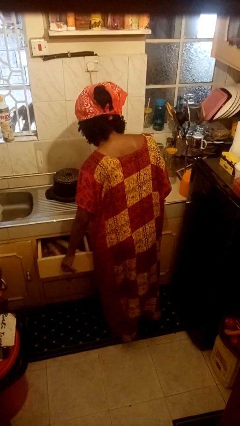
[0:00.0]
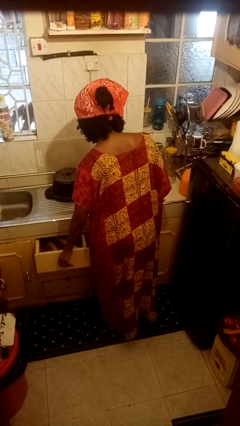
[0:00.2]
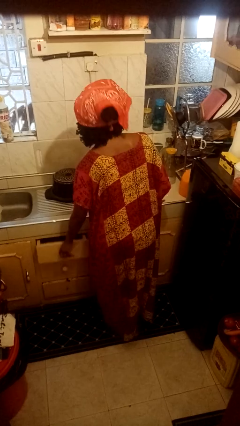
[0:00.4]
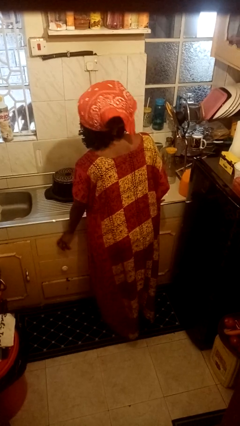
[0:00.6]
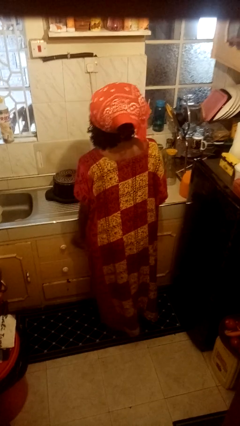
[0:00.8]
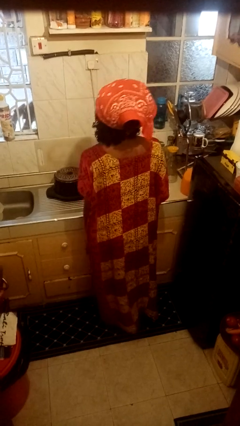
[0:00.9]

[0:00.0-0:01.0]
person closes kitchen drawer

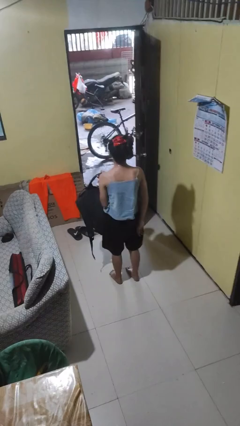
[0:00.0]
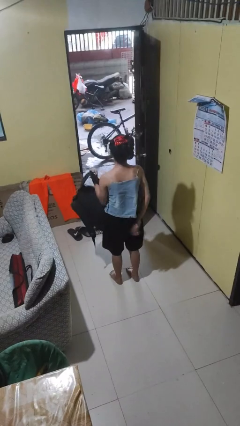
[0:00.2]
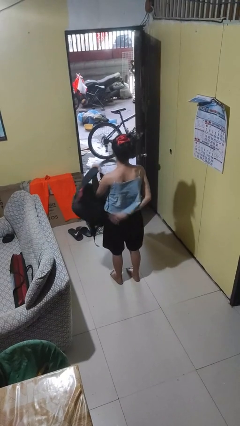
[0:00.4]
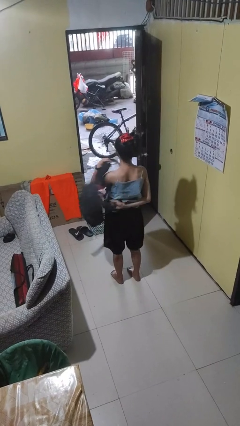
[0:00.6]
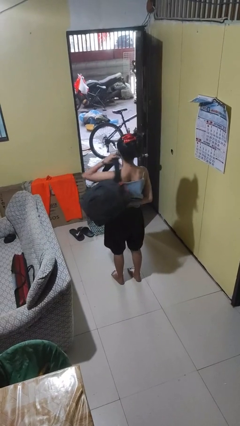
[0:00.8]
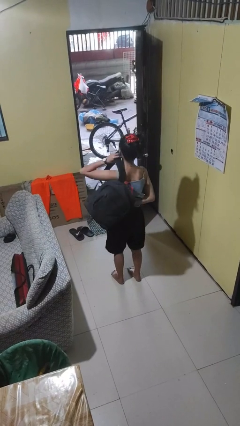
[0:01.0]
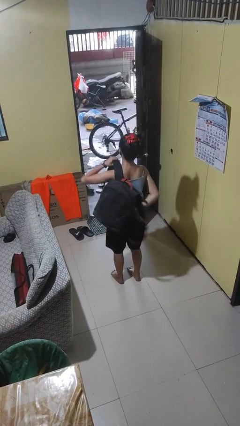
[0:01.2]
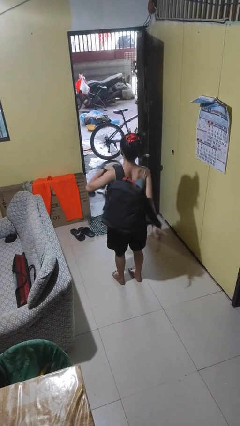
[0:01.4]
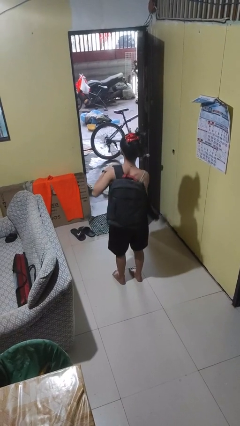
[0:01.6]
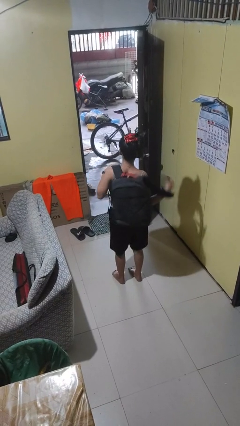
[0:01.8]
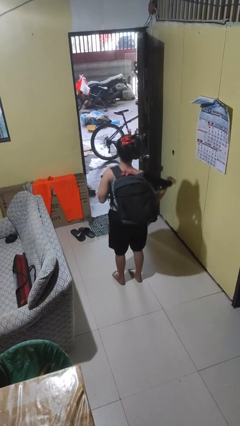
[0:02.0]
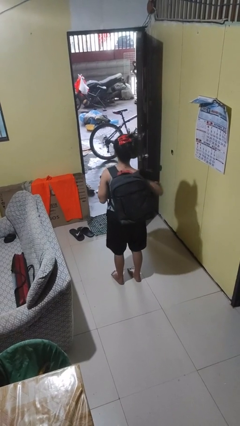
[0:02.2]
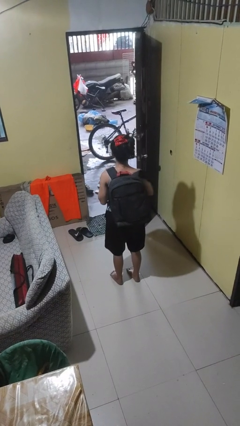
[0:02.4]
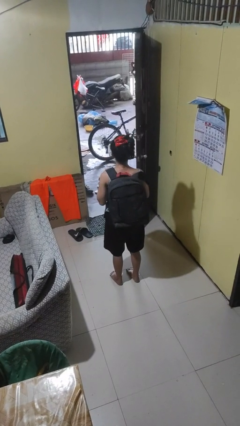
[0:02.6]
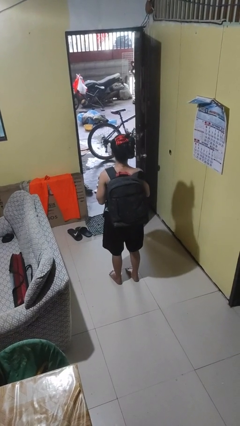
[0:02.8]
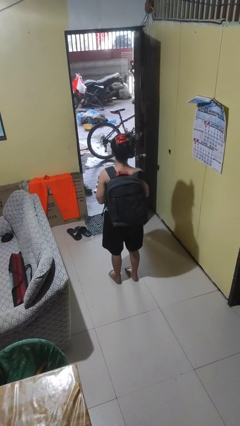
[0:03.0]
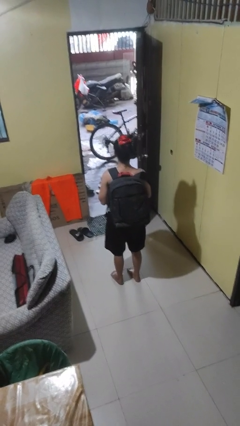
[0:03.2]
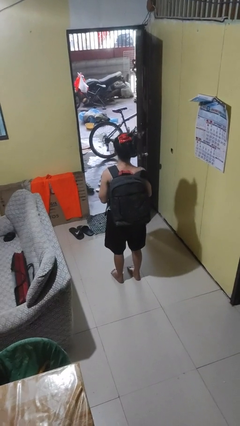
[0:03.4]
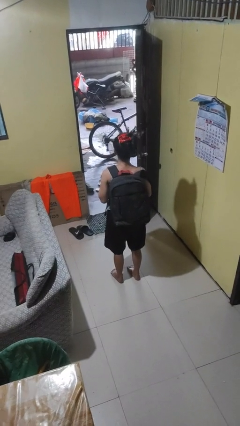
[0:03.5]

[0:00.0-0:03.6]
person puts on backpack

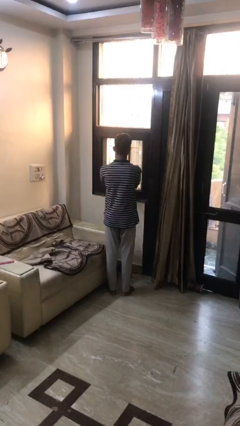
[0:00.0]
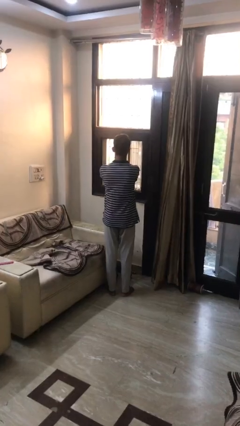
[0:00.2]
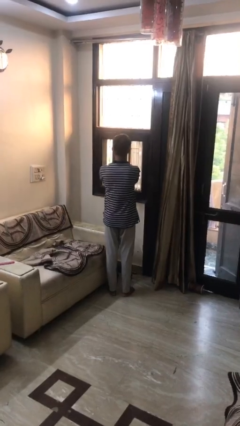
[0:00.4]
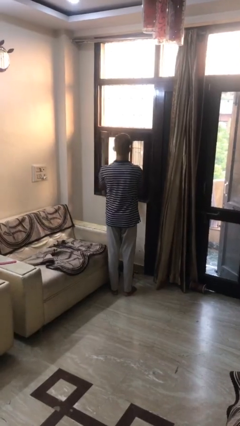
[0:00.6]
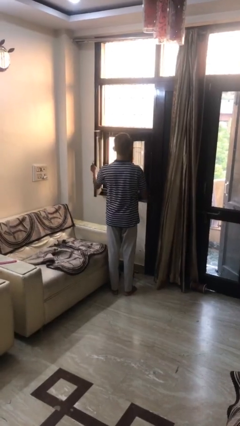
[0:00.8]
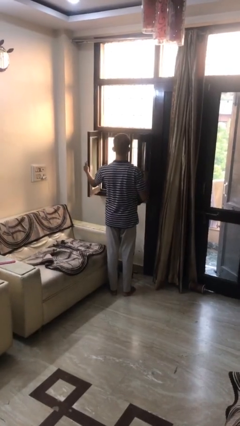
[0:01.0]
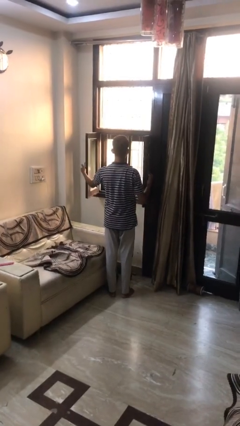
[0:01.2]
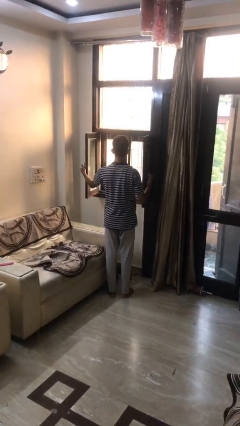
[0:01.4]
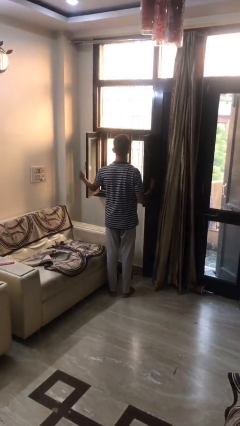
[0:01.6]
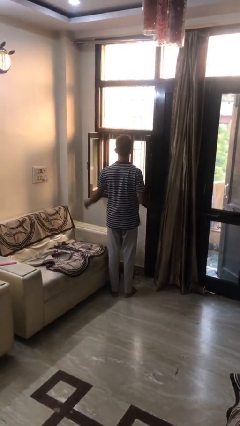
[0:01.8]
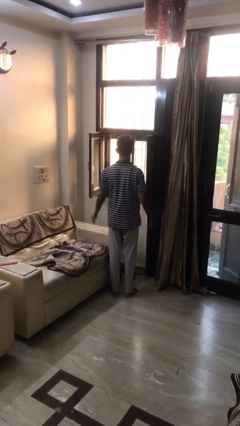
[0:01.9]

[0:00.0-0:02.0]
person opens home window

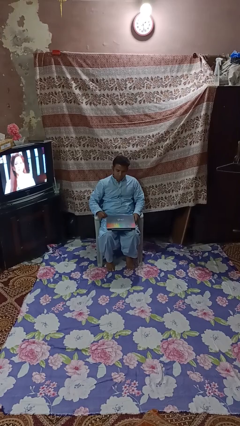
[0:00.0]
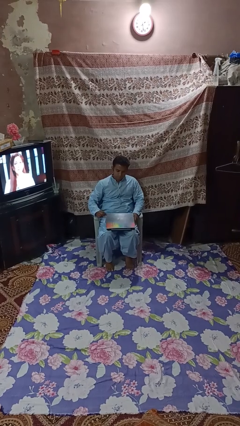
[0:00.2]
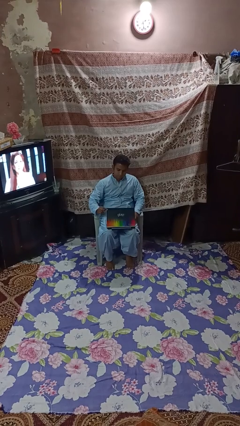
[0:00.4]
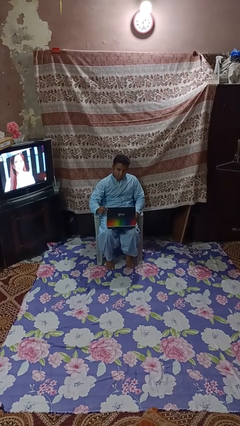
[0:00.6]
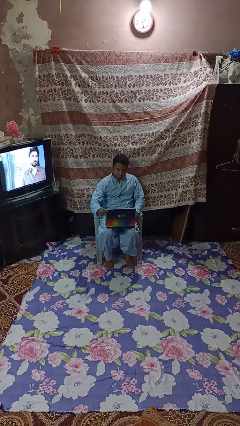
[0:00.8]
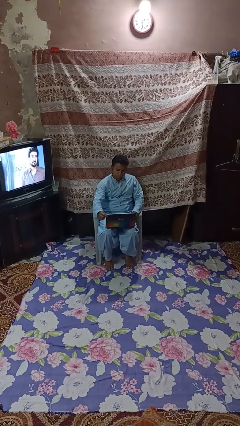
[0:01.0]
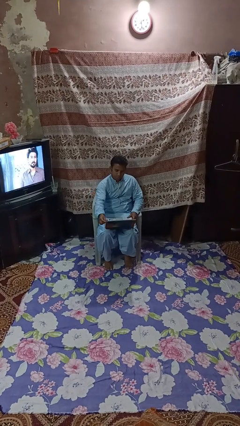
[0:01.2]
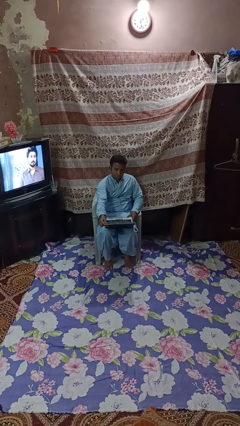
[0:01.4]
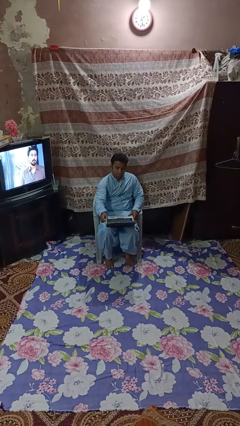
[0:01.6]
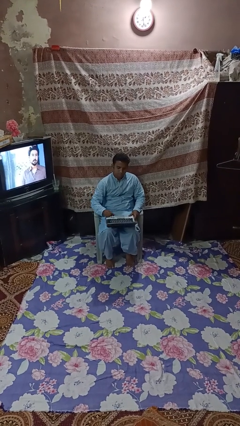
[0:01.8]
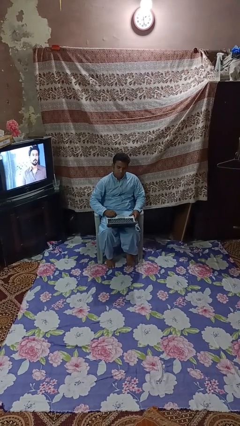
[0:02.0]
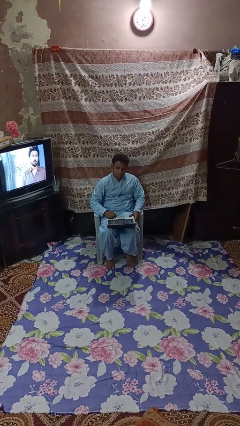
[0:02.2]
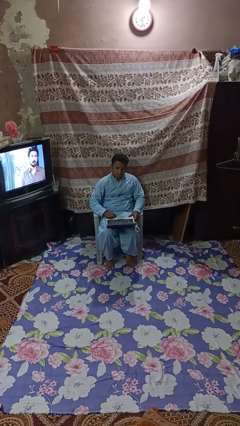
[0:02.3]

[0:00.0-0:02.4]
person opens laptop

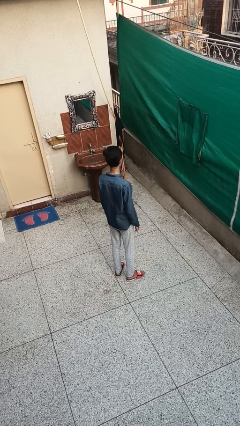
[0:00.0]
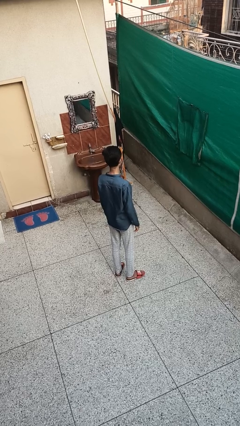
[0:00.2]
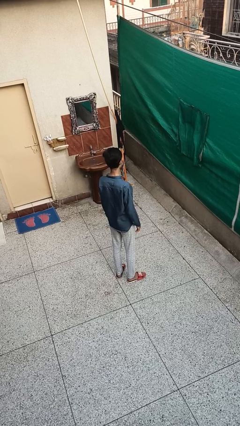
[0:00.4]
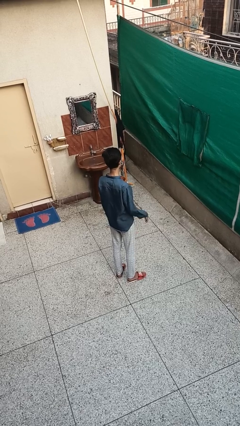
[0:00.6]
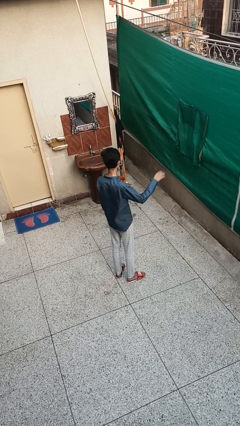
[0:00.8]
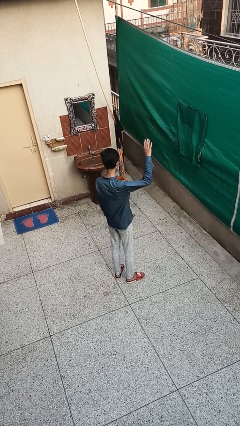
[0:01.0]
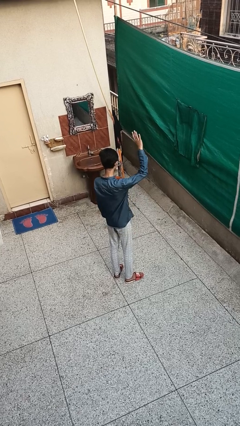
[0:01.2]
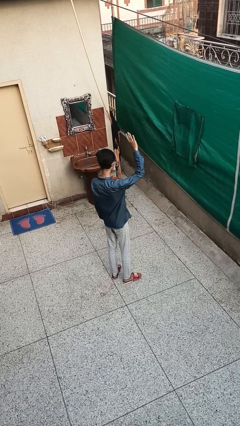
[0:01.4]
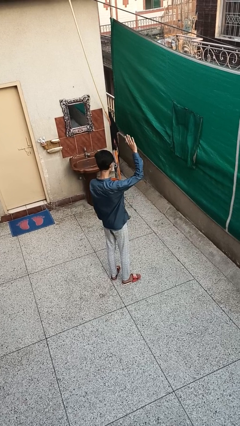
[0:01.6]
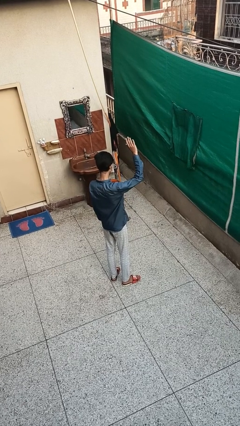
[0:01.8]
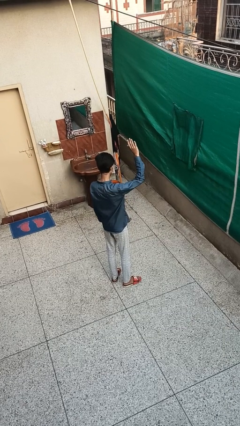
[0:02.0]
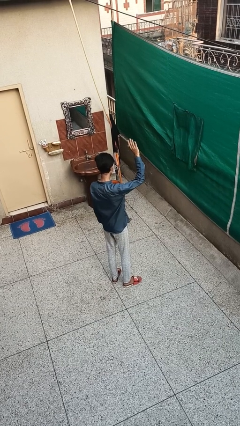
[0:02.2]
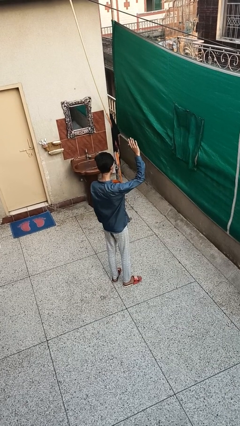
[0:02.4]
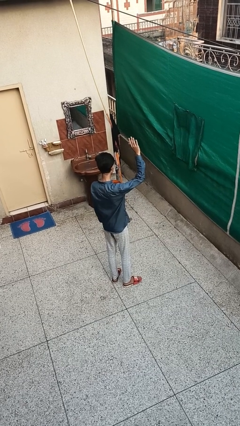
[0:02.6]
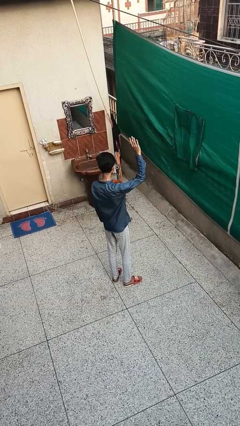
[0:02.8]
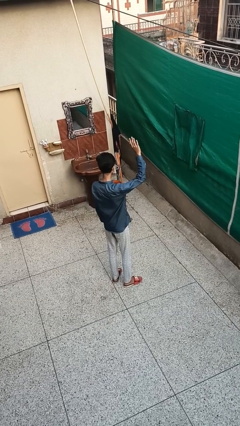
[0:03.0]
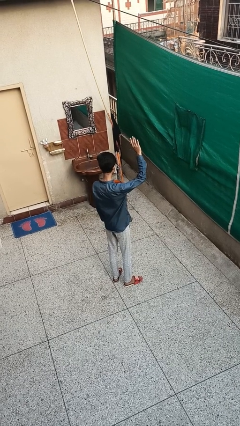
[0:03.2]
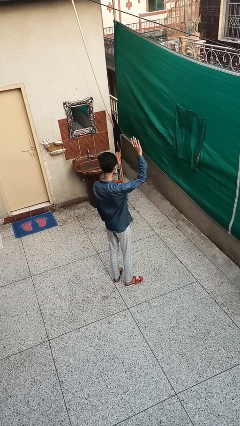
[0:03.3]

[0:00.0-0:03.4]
person gestures raise hand

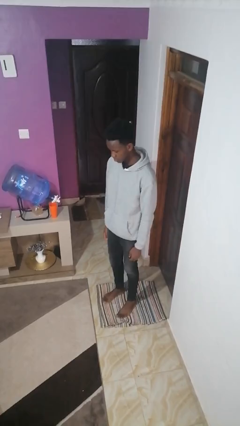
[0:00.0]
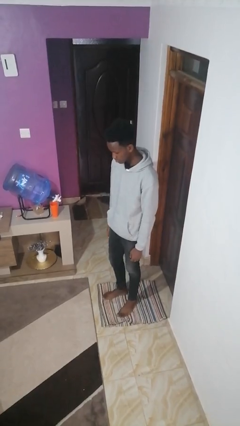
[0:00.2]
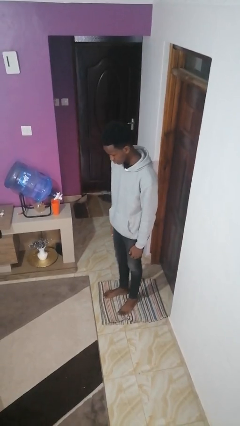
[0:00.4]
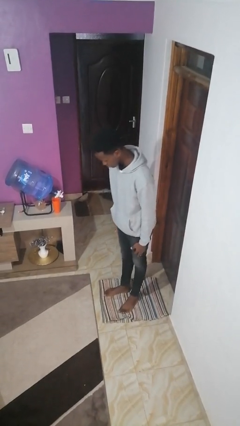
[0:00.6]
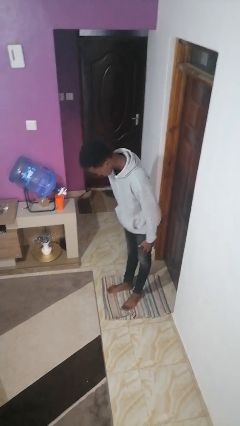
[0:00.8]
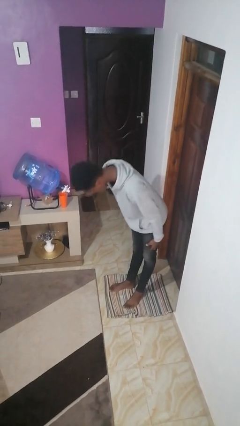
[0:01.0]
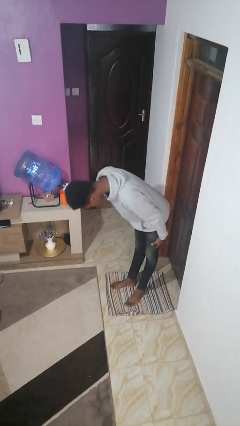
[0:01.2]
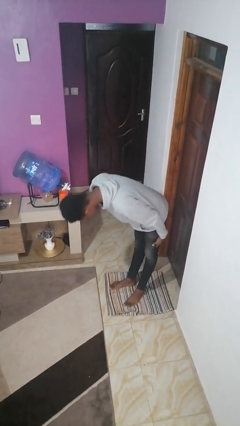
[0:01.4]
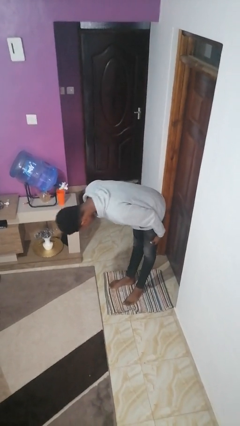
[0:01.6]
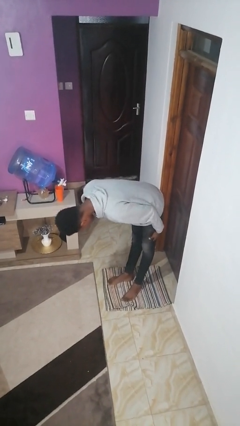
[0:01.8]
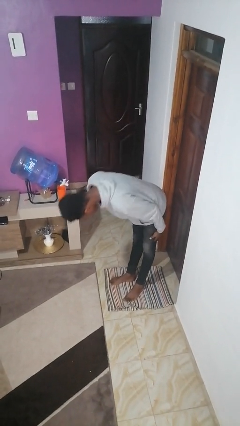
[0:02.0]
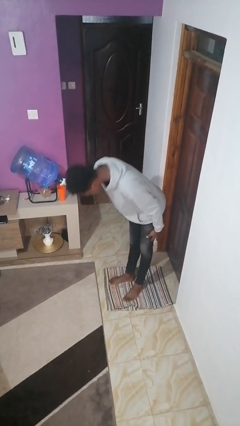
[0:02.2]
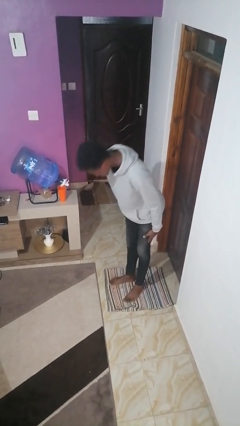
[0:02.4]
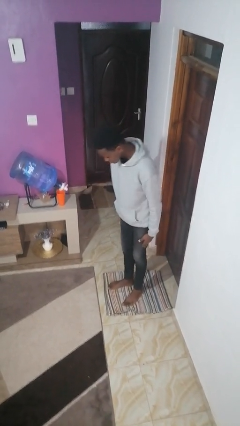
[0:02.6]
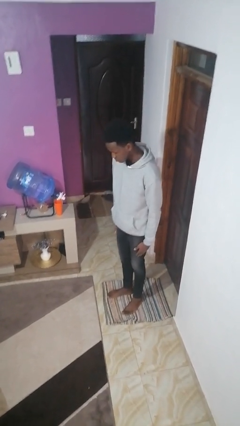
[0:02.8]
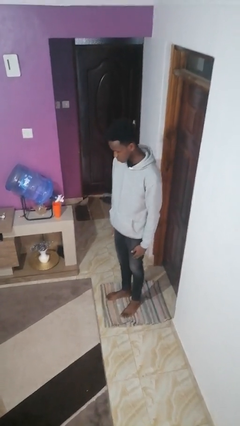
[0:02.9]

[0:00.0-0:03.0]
person bows

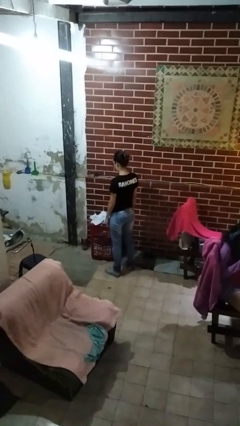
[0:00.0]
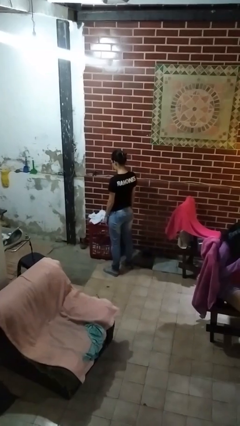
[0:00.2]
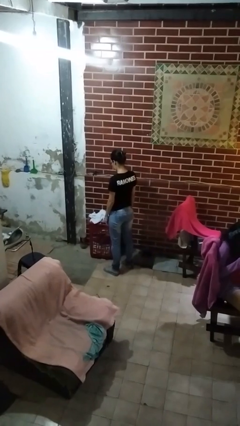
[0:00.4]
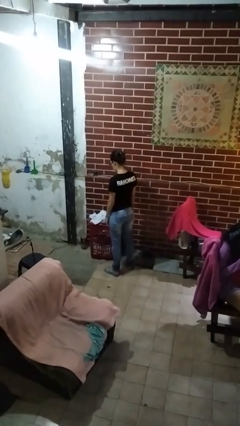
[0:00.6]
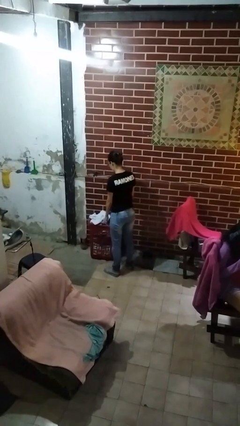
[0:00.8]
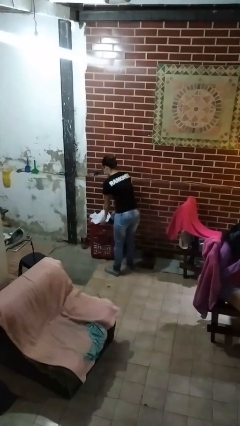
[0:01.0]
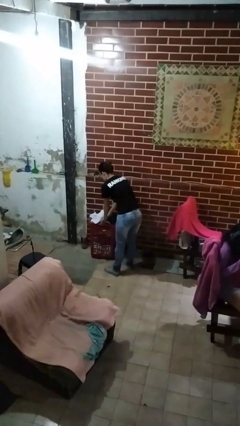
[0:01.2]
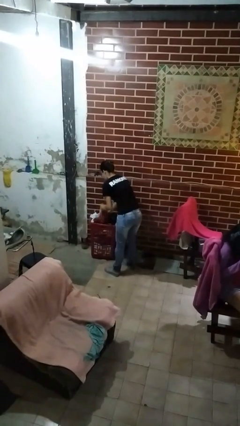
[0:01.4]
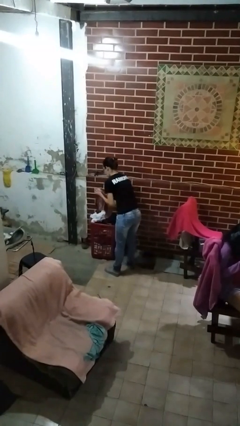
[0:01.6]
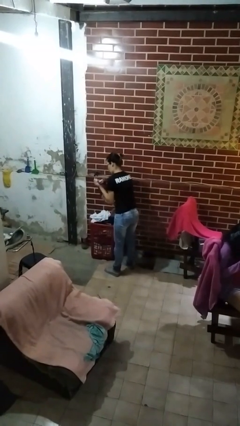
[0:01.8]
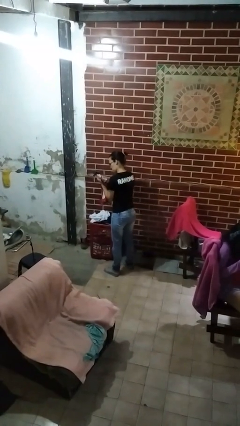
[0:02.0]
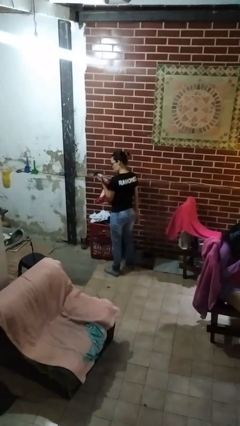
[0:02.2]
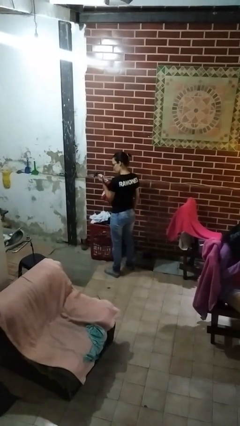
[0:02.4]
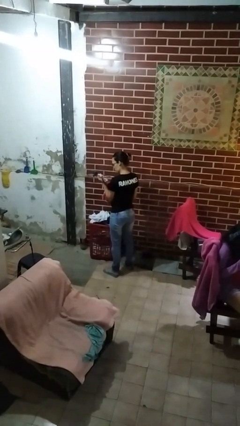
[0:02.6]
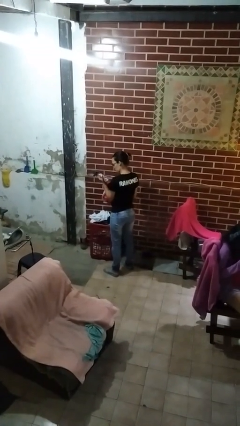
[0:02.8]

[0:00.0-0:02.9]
person takes object from basket
